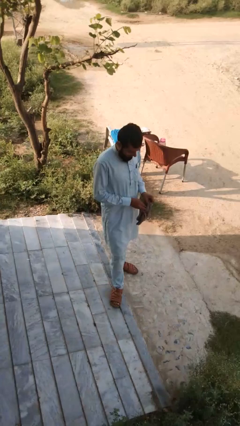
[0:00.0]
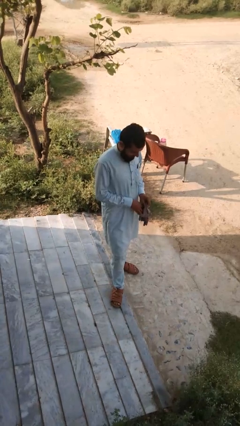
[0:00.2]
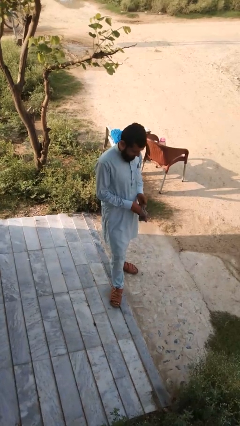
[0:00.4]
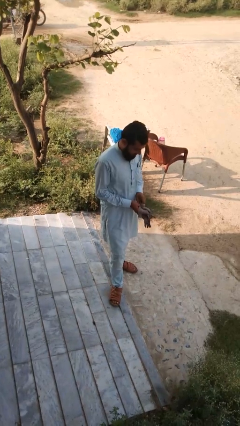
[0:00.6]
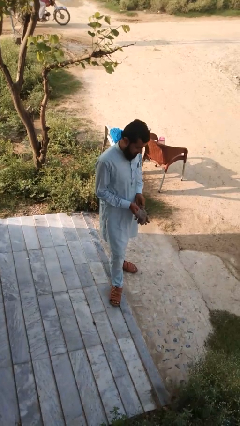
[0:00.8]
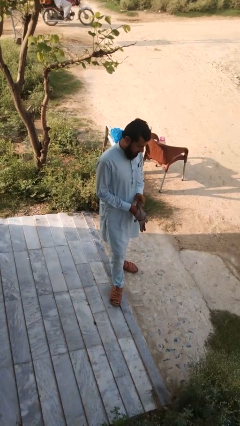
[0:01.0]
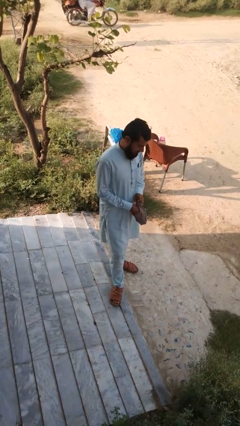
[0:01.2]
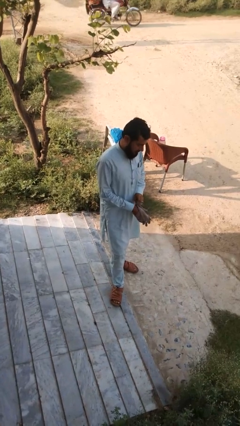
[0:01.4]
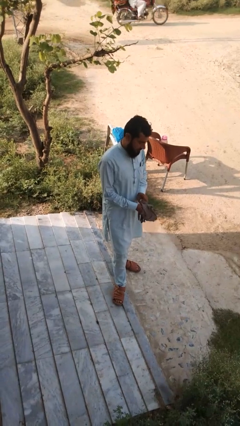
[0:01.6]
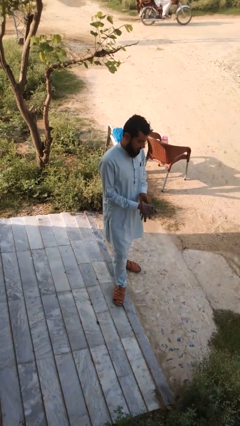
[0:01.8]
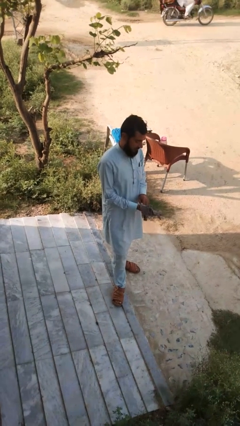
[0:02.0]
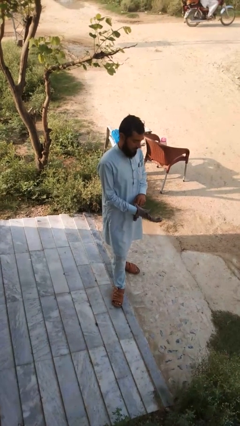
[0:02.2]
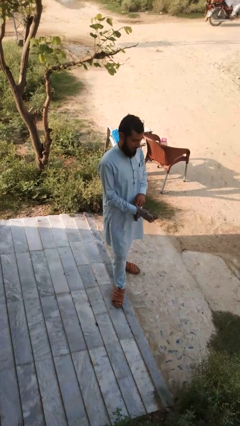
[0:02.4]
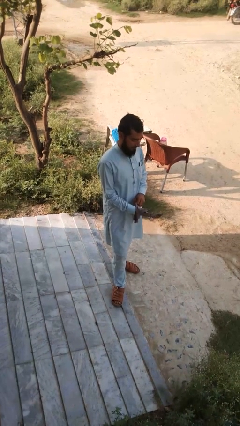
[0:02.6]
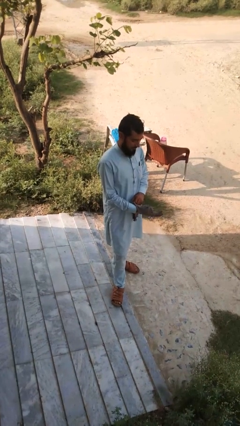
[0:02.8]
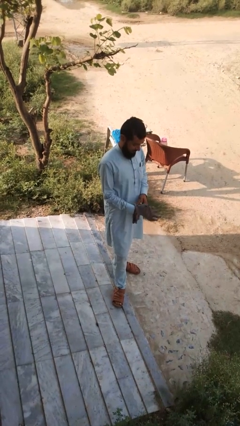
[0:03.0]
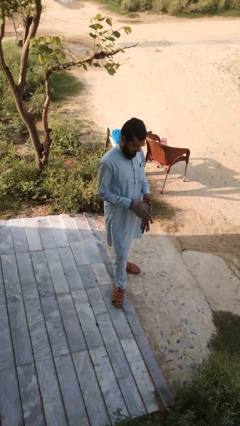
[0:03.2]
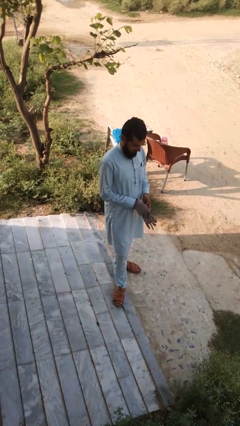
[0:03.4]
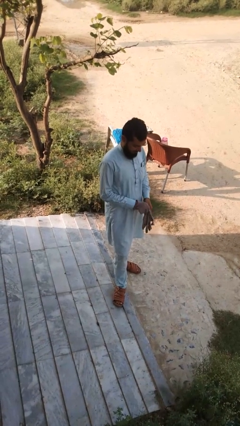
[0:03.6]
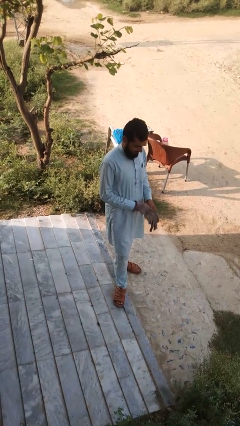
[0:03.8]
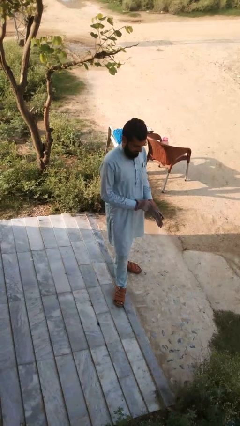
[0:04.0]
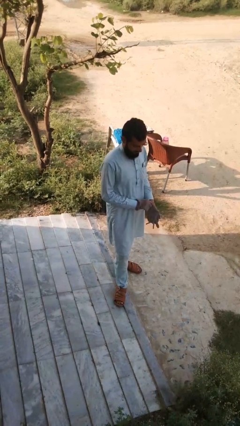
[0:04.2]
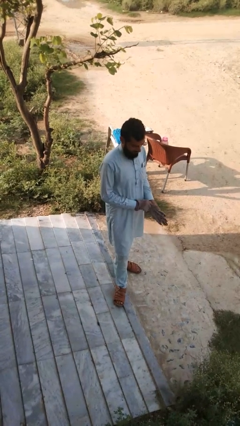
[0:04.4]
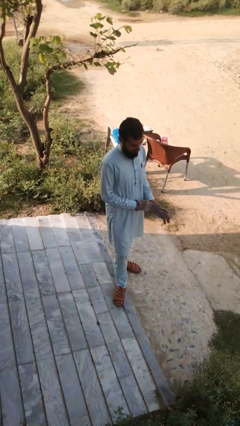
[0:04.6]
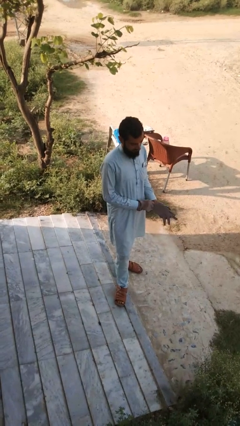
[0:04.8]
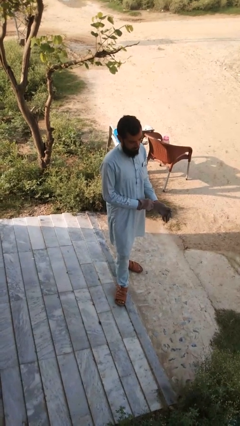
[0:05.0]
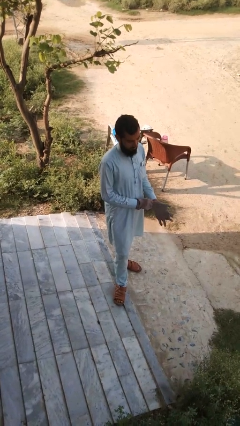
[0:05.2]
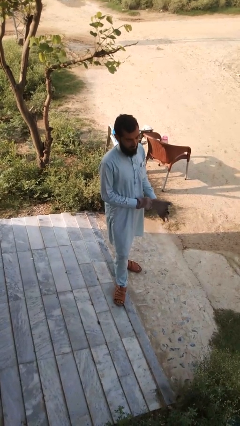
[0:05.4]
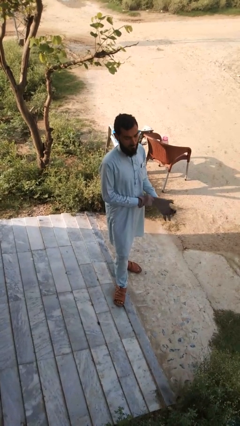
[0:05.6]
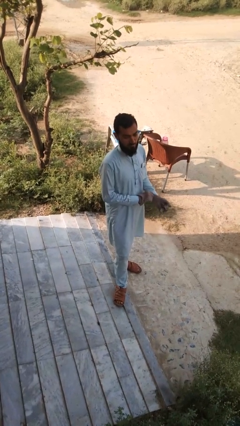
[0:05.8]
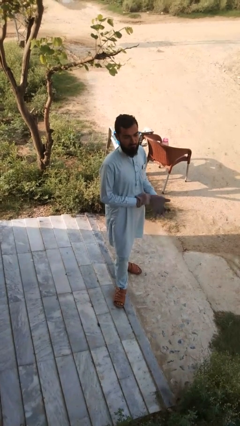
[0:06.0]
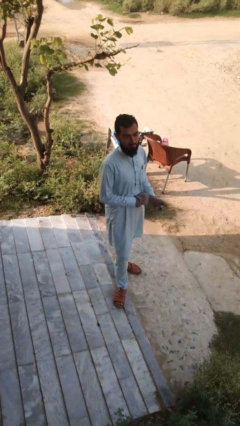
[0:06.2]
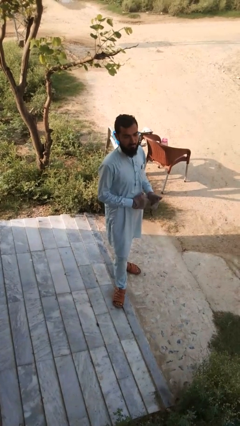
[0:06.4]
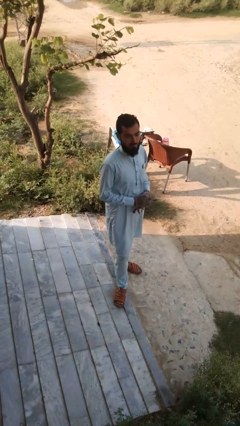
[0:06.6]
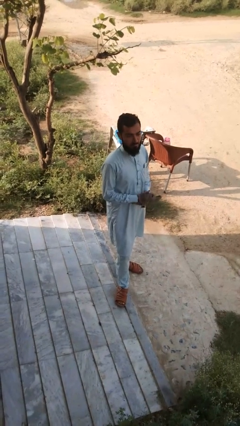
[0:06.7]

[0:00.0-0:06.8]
person puts on gloves

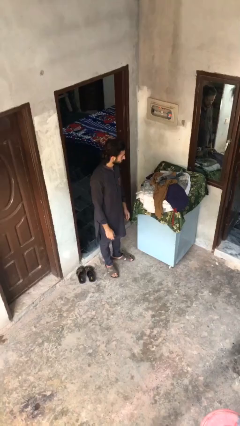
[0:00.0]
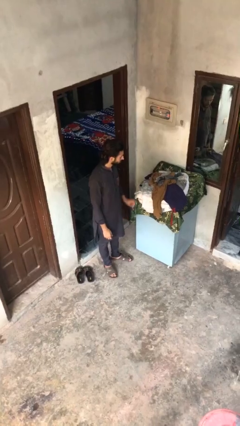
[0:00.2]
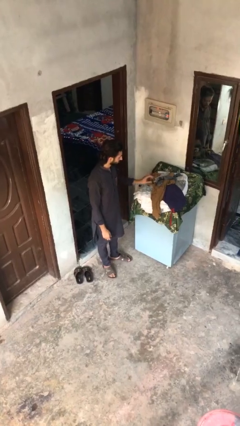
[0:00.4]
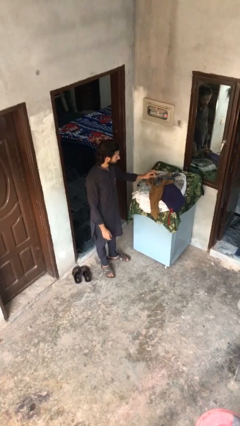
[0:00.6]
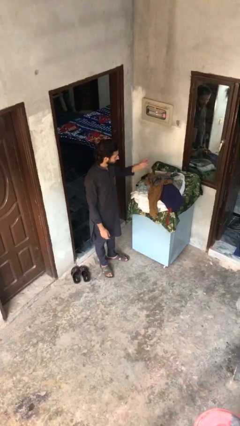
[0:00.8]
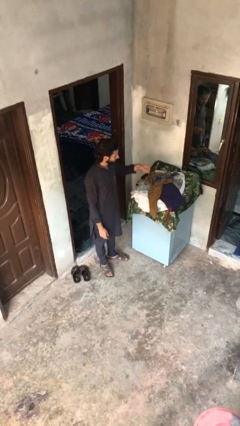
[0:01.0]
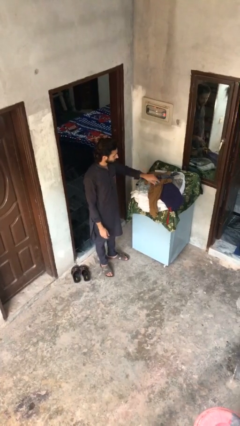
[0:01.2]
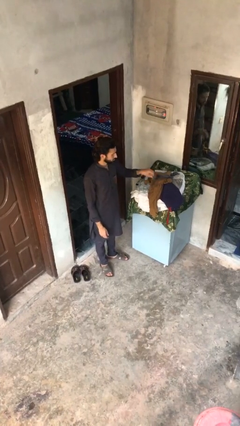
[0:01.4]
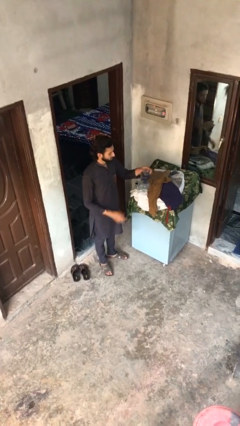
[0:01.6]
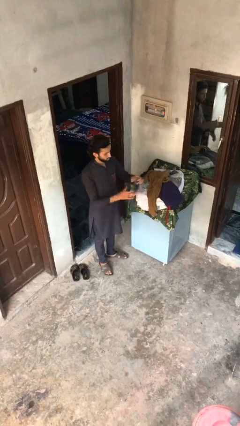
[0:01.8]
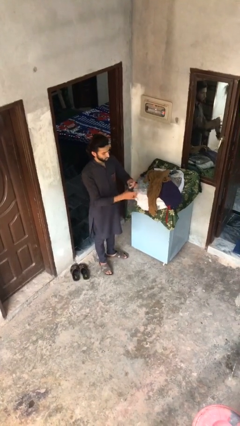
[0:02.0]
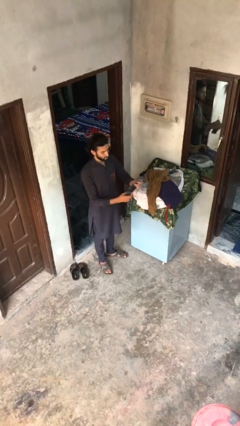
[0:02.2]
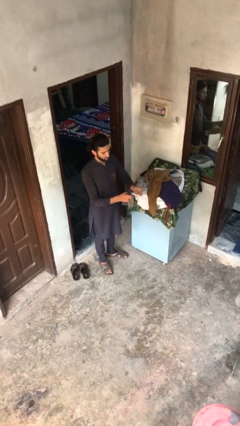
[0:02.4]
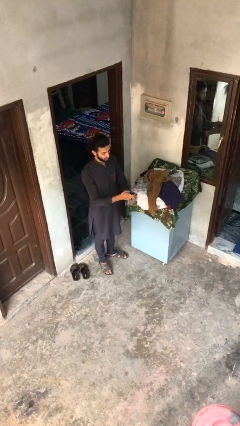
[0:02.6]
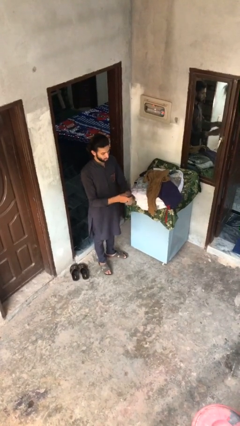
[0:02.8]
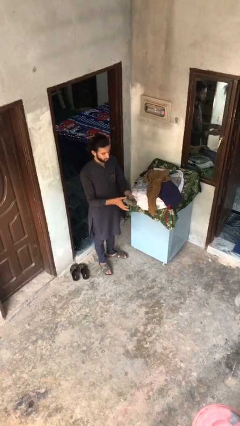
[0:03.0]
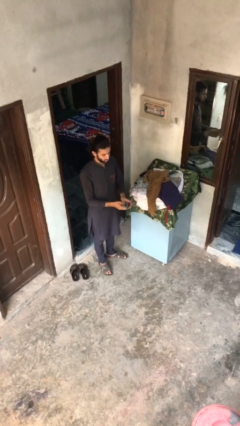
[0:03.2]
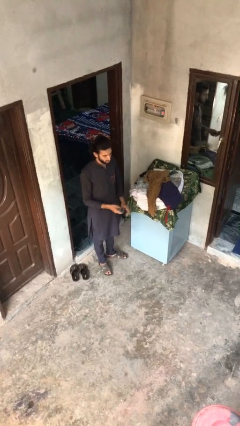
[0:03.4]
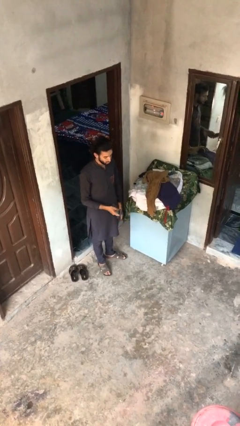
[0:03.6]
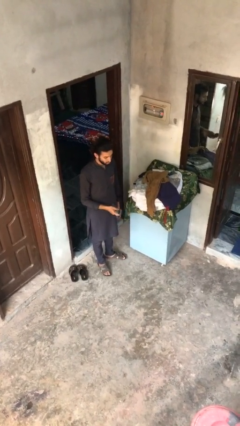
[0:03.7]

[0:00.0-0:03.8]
person folds socks

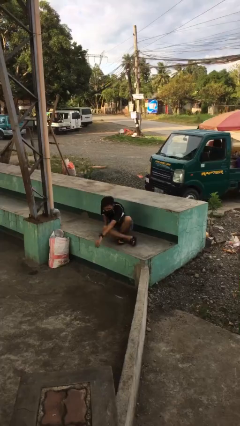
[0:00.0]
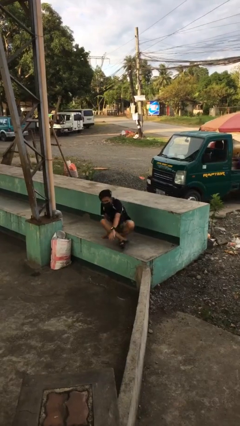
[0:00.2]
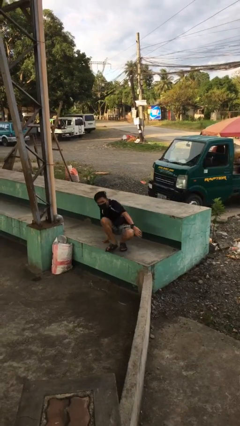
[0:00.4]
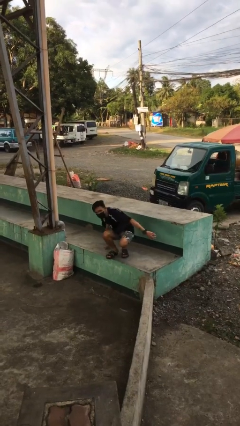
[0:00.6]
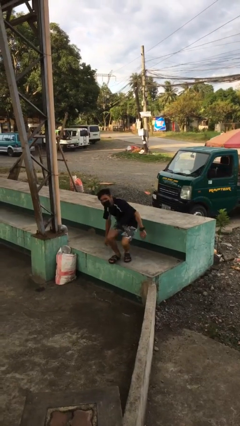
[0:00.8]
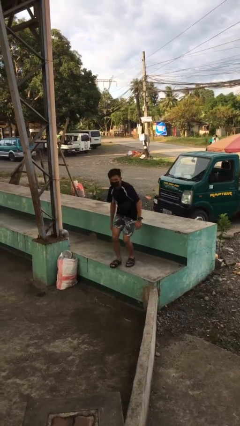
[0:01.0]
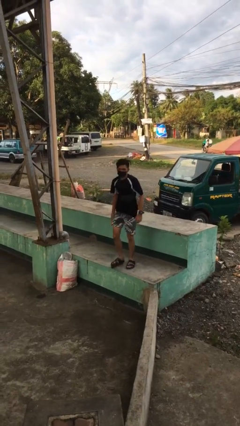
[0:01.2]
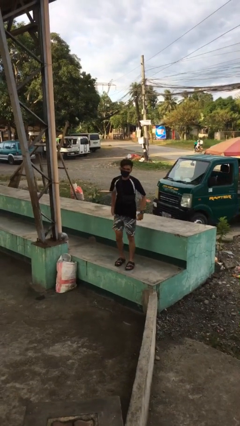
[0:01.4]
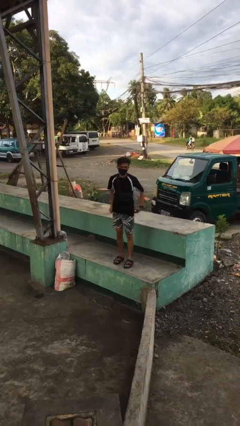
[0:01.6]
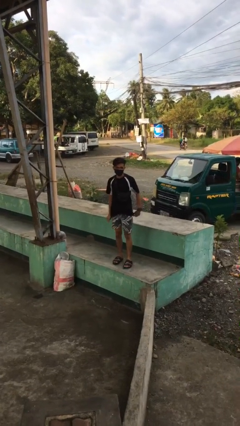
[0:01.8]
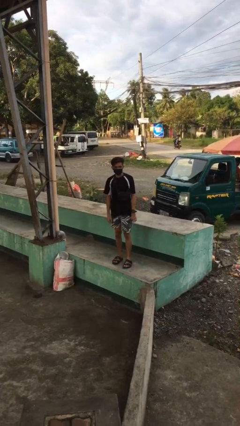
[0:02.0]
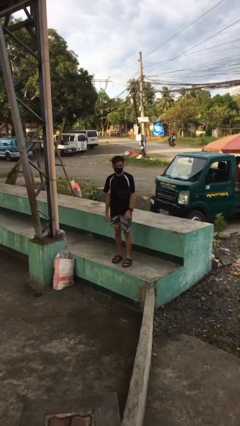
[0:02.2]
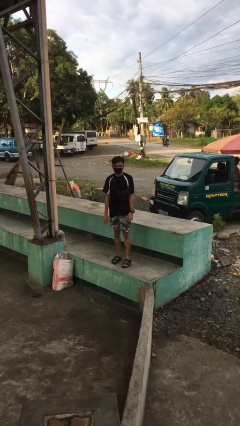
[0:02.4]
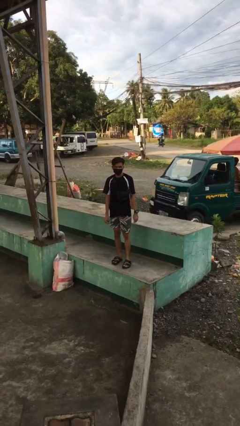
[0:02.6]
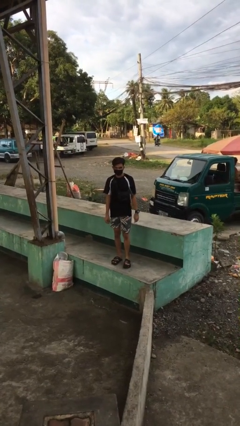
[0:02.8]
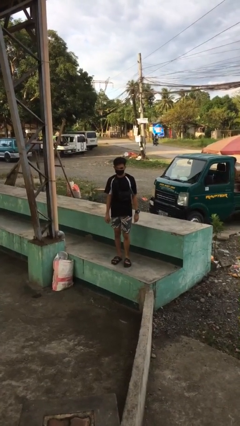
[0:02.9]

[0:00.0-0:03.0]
person stands up from floor

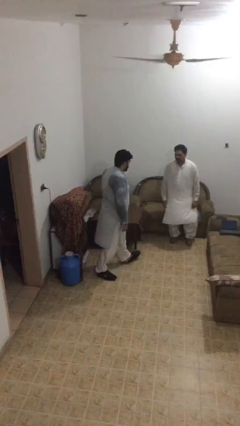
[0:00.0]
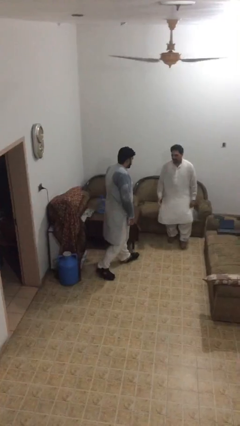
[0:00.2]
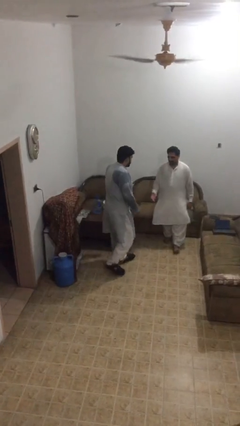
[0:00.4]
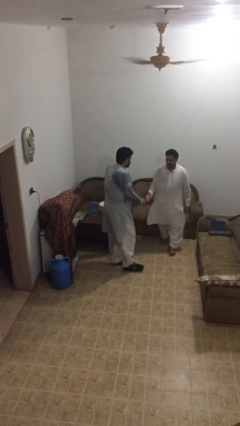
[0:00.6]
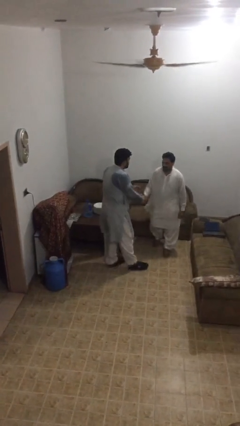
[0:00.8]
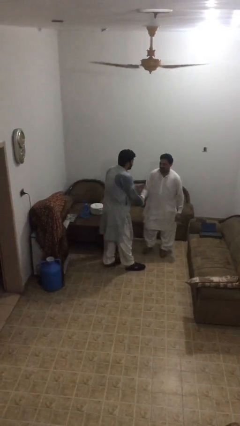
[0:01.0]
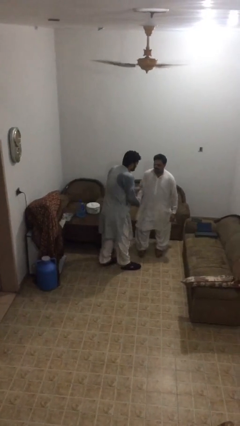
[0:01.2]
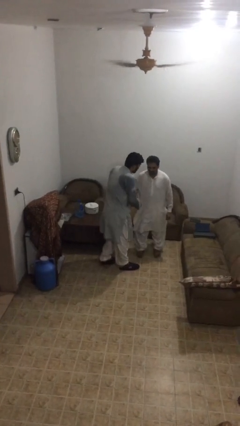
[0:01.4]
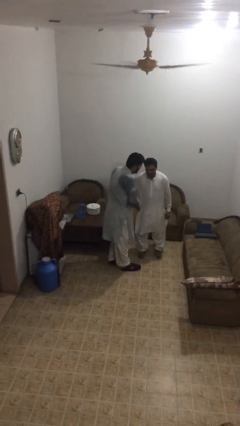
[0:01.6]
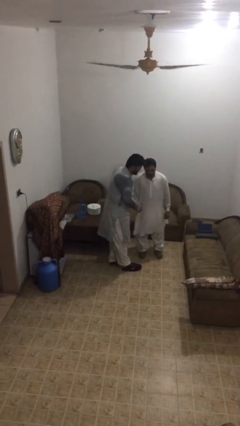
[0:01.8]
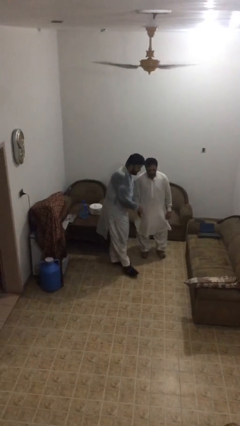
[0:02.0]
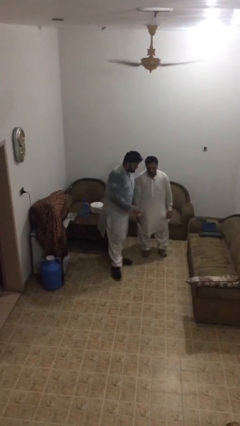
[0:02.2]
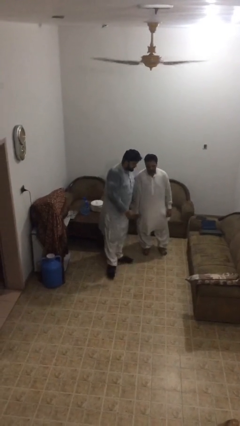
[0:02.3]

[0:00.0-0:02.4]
person shakes hand

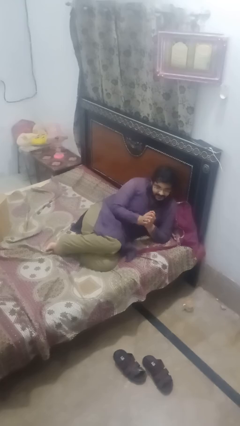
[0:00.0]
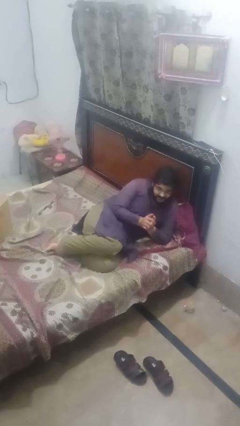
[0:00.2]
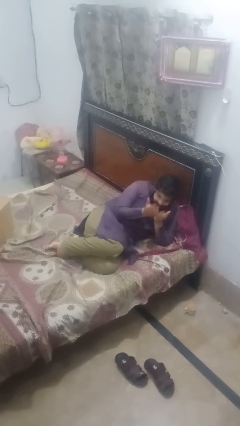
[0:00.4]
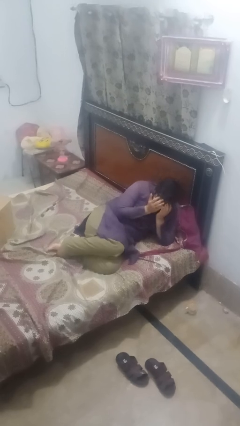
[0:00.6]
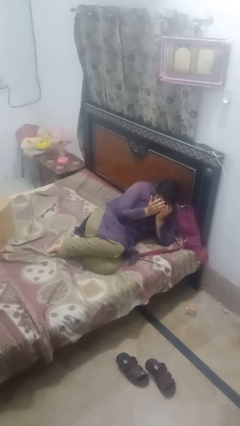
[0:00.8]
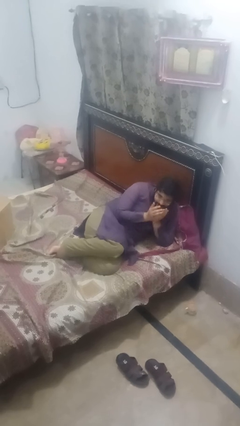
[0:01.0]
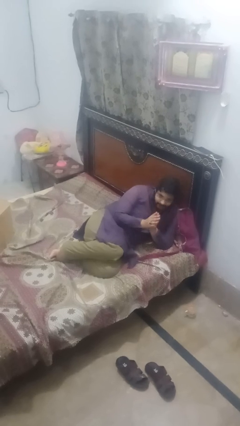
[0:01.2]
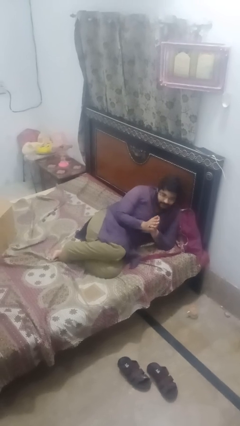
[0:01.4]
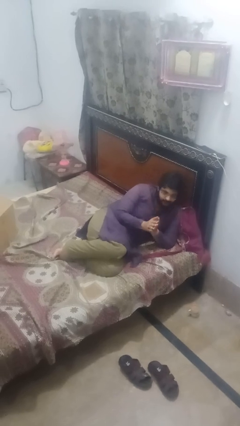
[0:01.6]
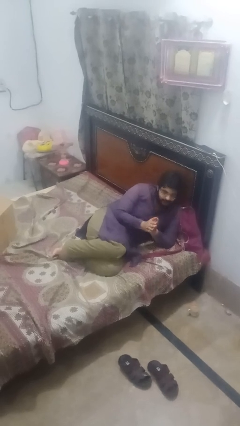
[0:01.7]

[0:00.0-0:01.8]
person covers face with hands
